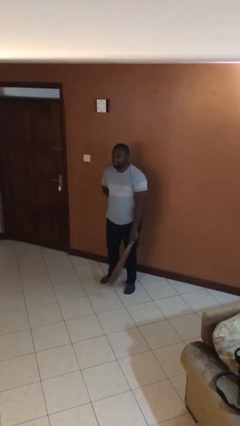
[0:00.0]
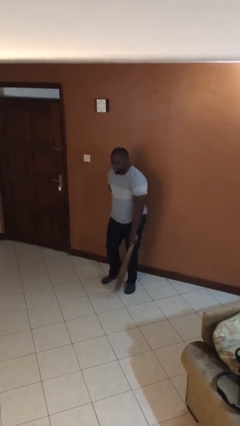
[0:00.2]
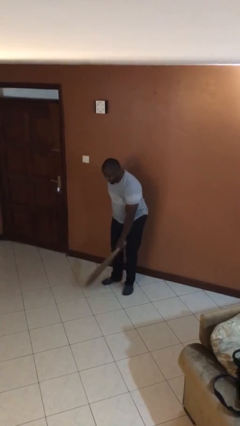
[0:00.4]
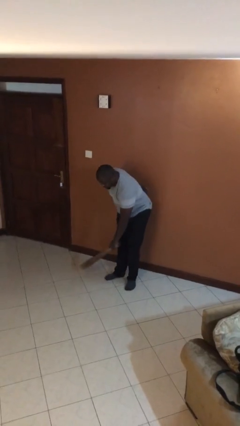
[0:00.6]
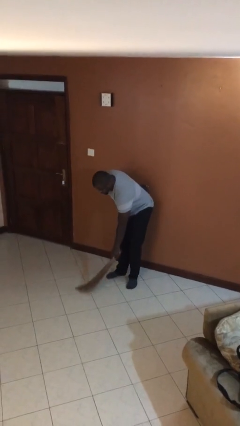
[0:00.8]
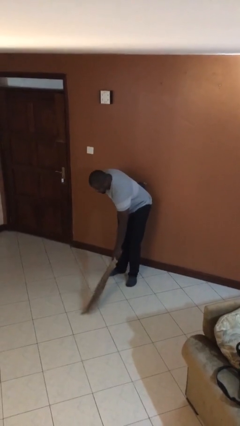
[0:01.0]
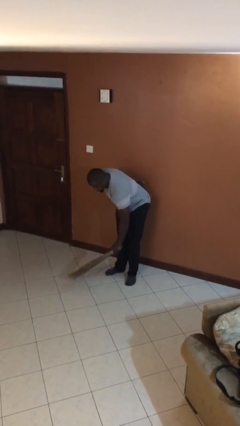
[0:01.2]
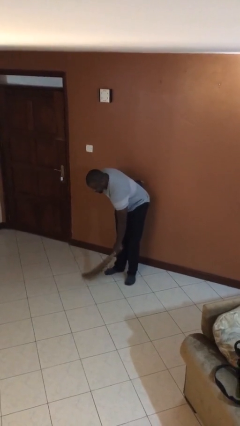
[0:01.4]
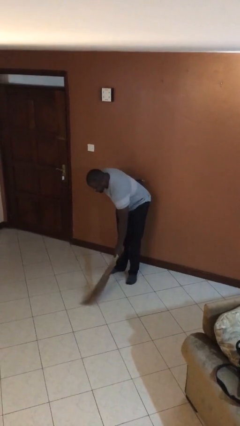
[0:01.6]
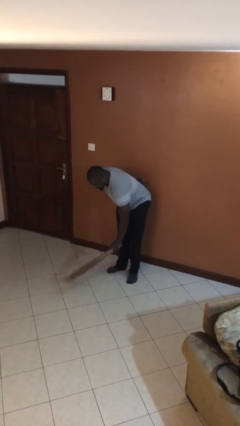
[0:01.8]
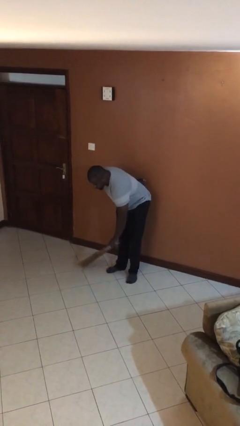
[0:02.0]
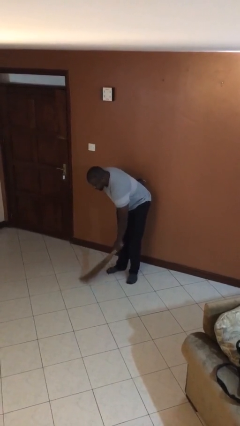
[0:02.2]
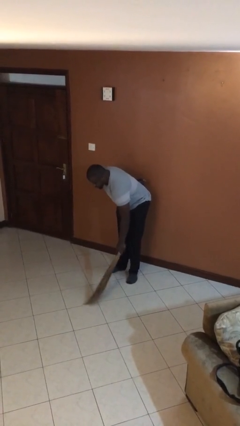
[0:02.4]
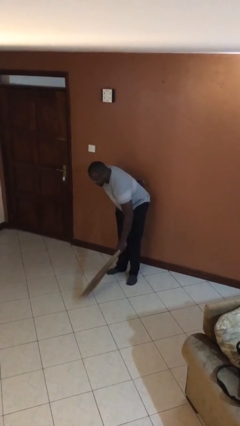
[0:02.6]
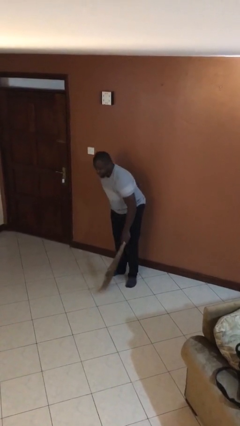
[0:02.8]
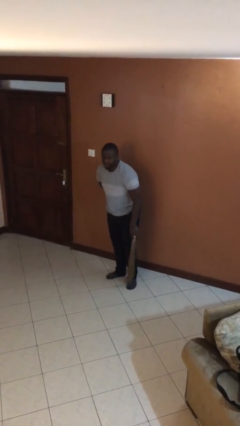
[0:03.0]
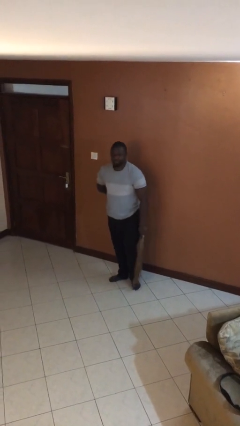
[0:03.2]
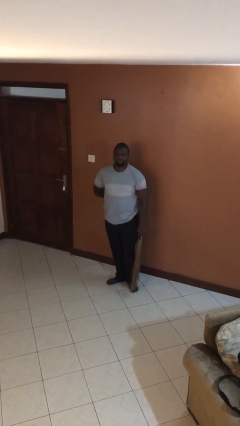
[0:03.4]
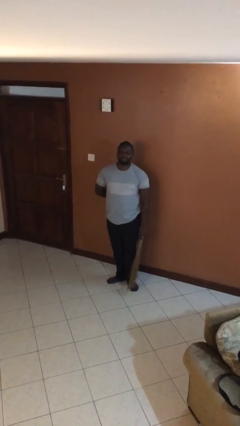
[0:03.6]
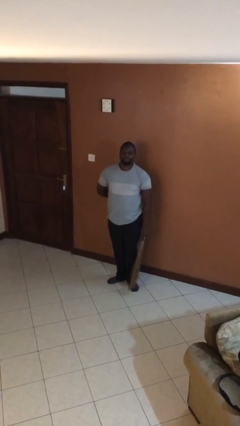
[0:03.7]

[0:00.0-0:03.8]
person sweeps floor

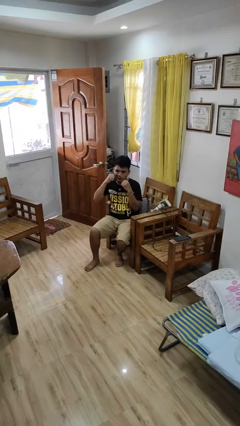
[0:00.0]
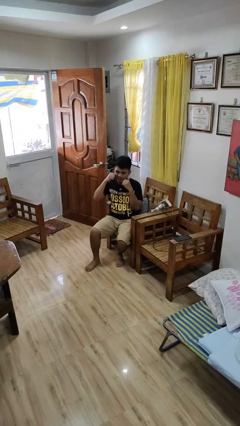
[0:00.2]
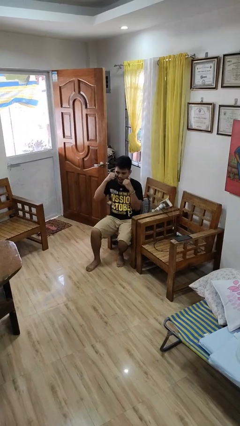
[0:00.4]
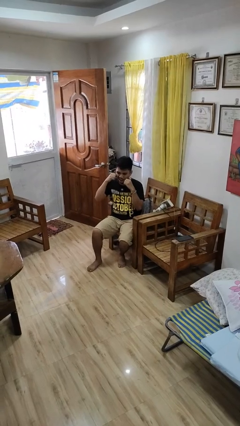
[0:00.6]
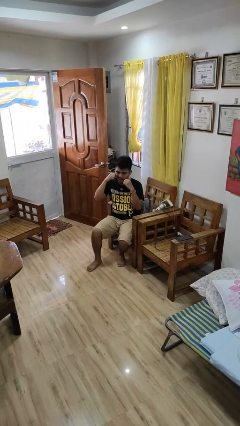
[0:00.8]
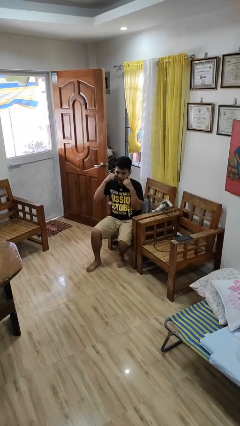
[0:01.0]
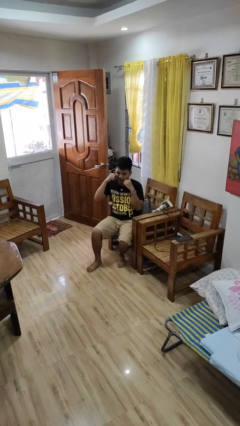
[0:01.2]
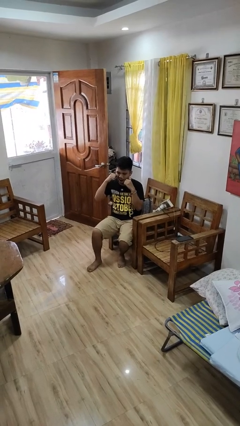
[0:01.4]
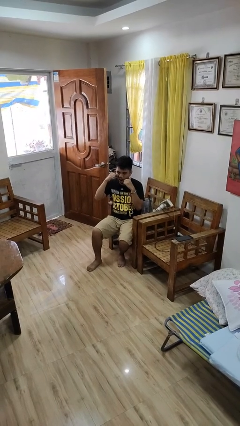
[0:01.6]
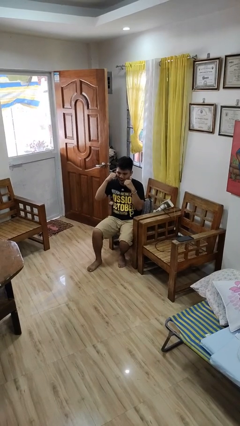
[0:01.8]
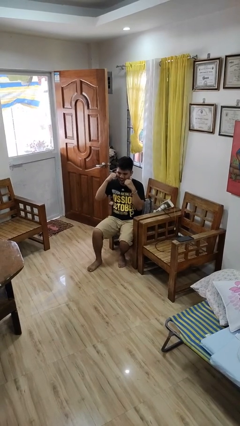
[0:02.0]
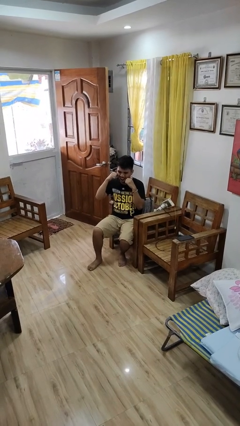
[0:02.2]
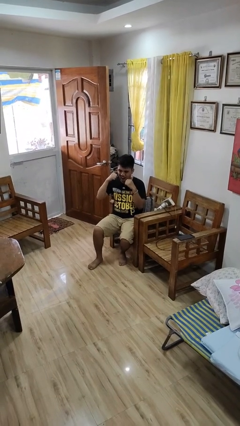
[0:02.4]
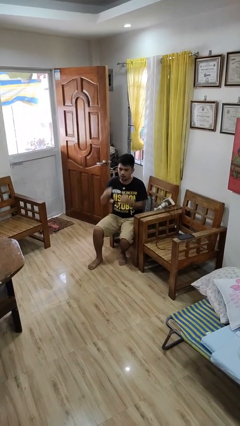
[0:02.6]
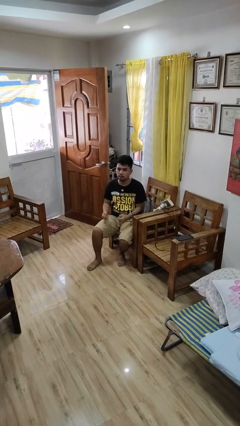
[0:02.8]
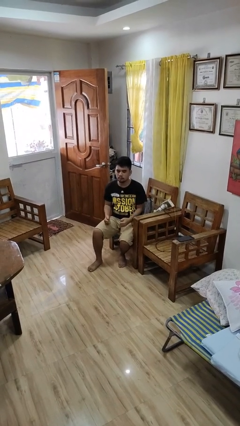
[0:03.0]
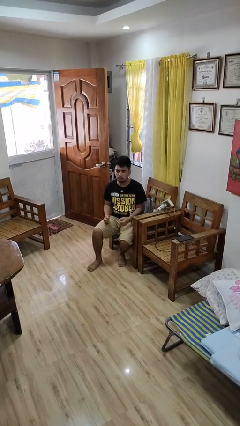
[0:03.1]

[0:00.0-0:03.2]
person flosses

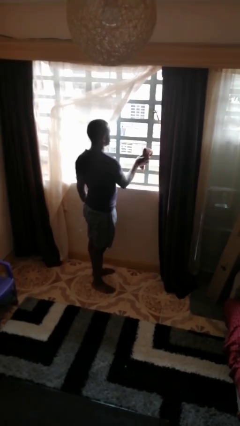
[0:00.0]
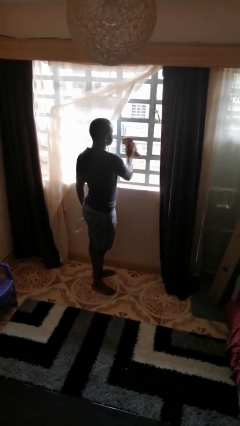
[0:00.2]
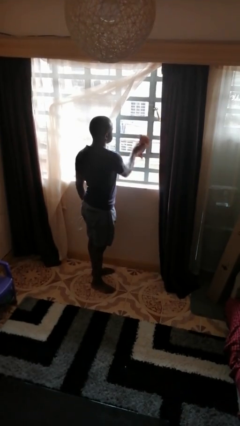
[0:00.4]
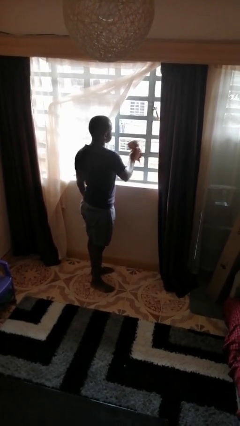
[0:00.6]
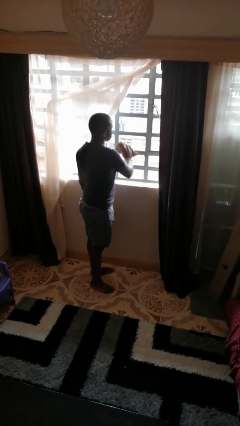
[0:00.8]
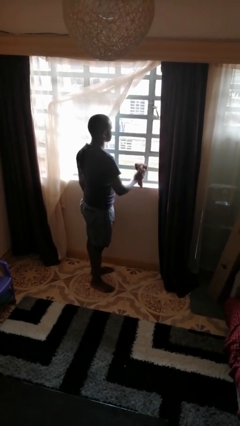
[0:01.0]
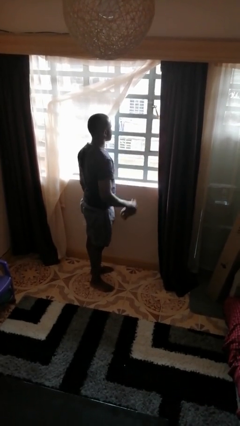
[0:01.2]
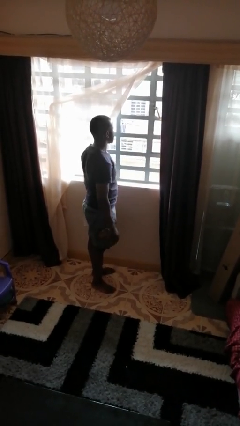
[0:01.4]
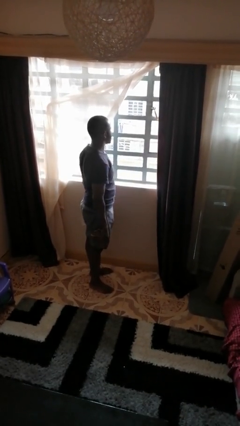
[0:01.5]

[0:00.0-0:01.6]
person washes window

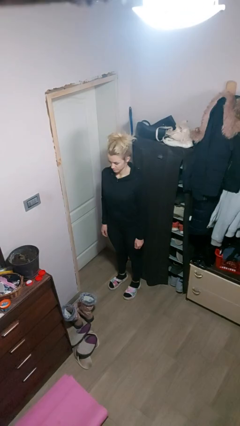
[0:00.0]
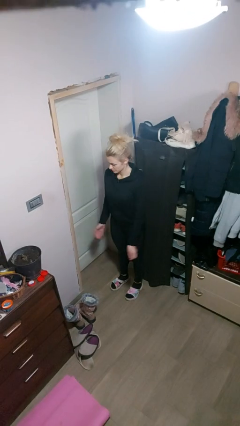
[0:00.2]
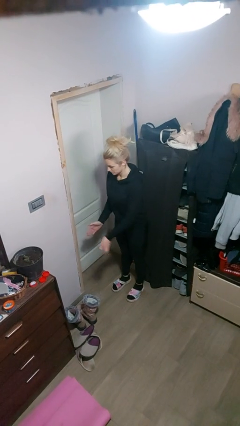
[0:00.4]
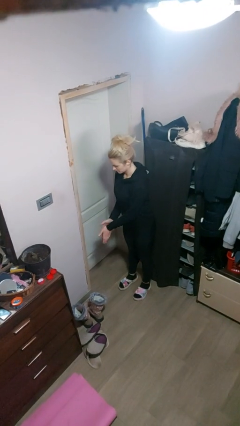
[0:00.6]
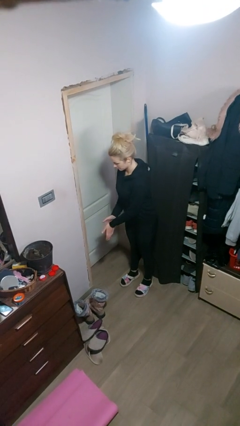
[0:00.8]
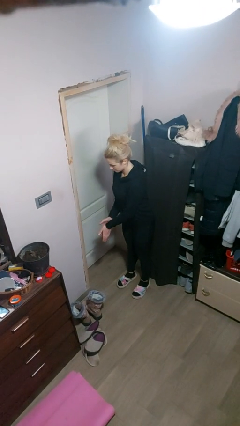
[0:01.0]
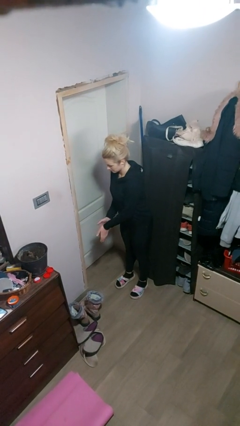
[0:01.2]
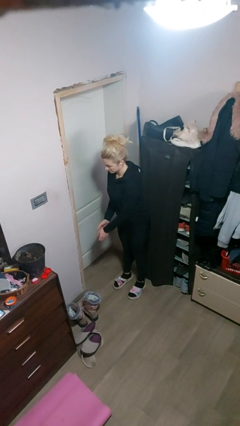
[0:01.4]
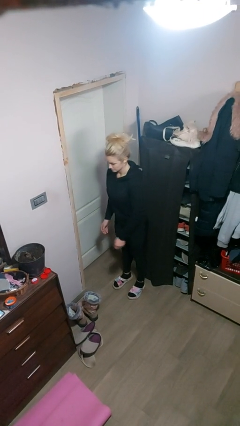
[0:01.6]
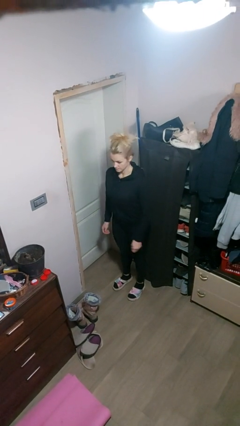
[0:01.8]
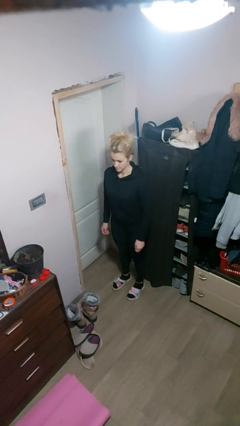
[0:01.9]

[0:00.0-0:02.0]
person claps hands

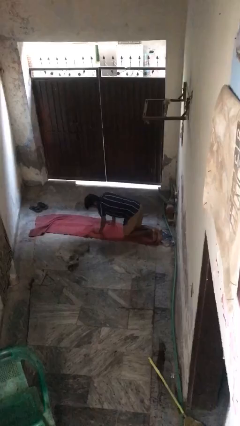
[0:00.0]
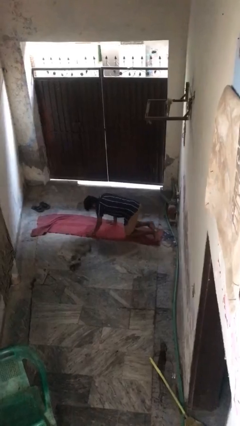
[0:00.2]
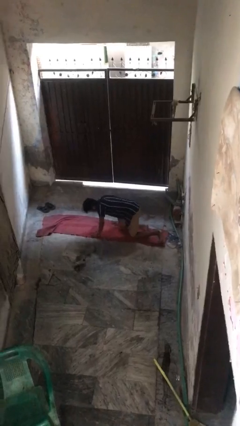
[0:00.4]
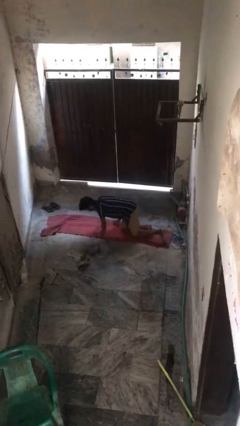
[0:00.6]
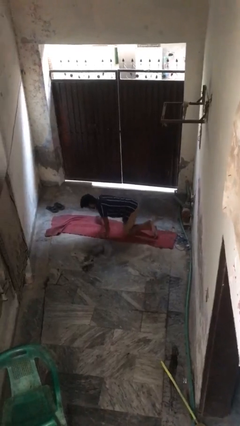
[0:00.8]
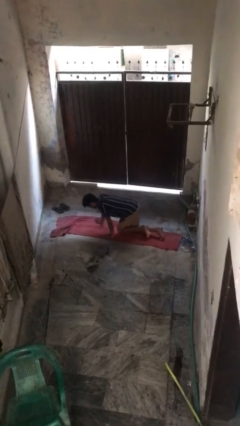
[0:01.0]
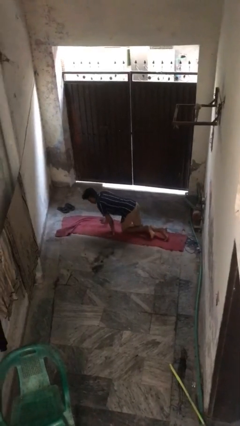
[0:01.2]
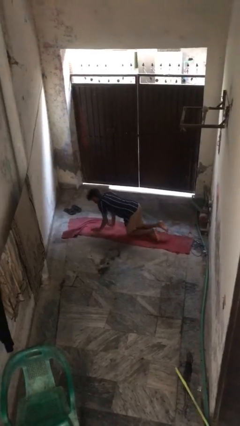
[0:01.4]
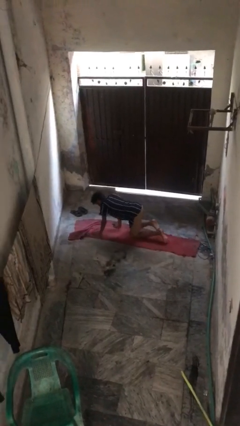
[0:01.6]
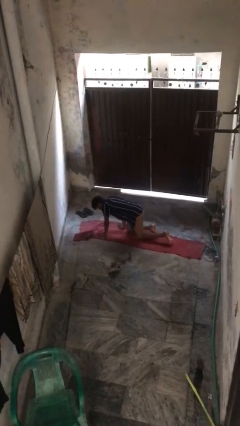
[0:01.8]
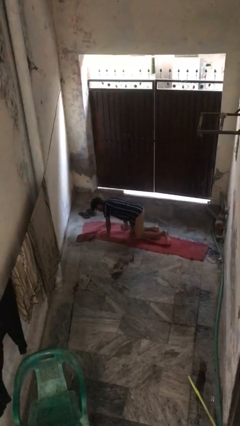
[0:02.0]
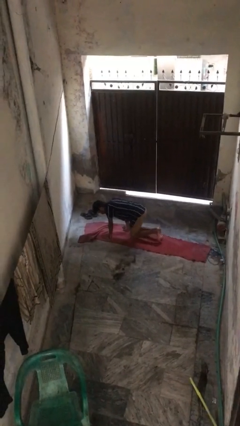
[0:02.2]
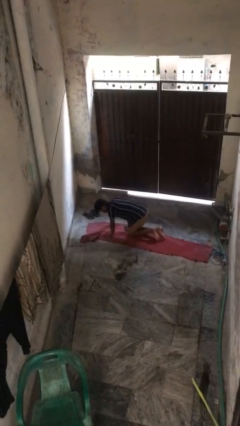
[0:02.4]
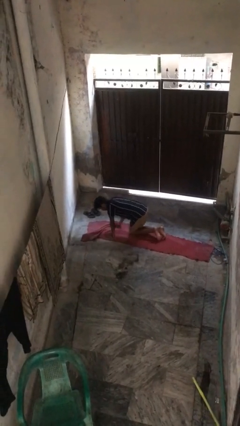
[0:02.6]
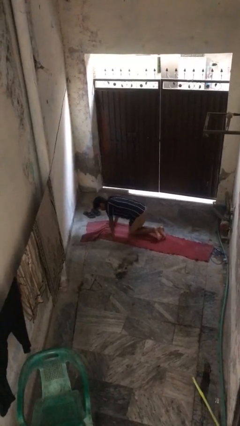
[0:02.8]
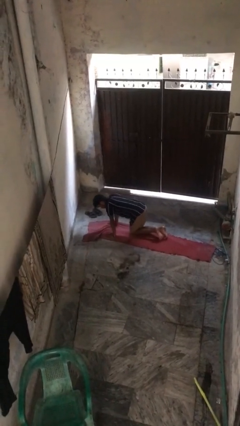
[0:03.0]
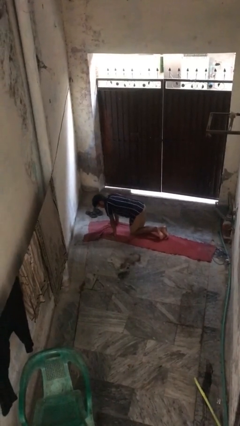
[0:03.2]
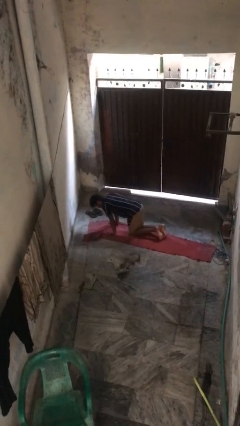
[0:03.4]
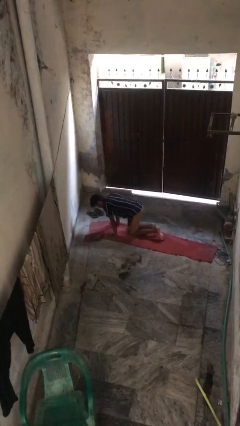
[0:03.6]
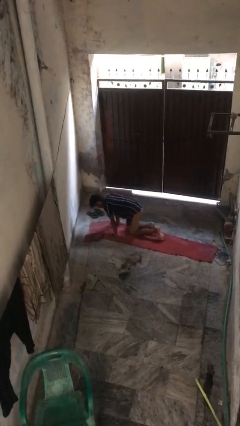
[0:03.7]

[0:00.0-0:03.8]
person crawls

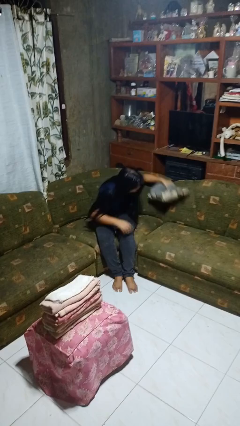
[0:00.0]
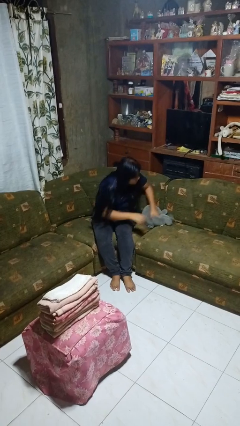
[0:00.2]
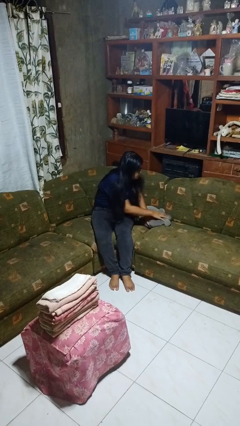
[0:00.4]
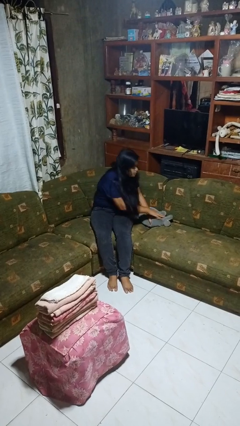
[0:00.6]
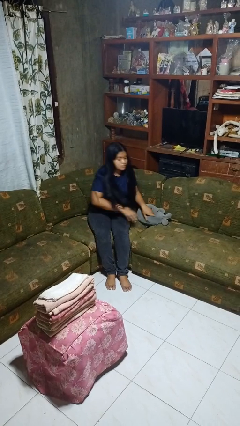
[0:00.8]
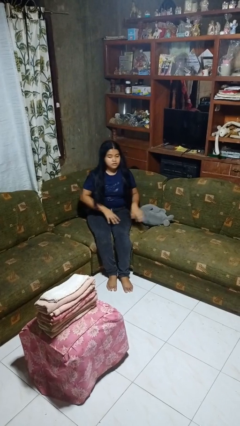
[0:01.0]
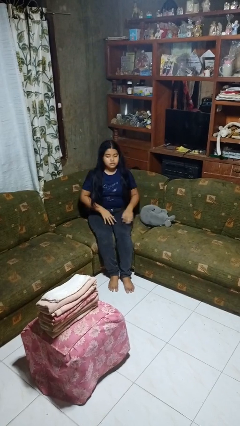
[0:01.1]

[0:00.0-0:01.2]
person searches in couch

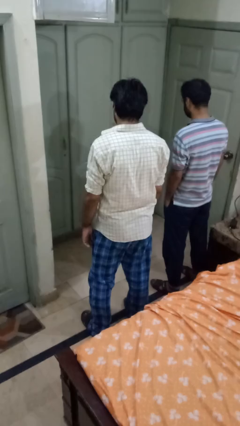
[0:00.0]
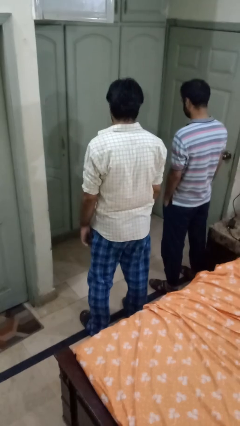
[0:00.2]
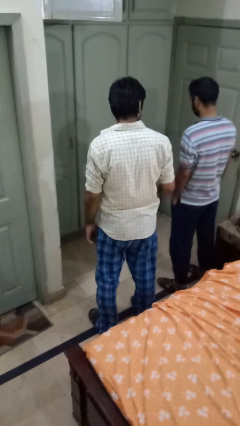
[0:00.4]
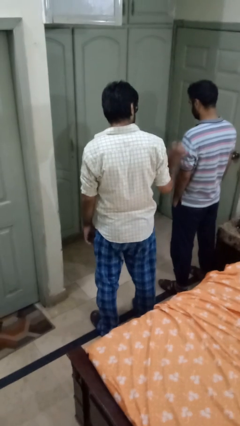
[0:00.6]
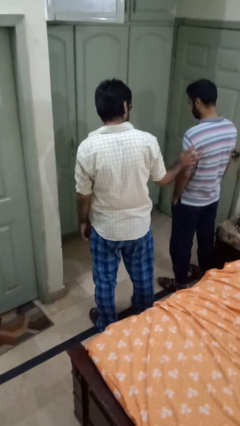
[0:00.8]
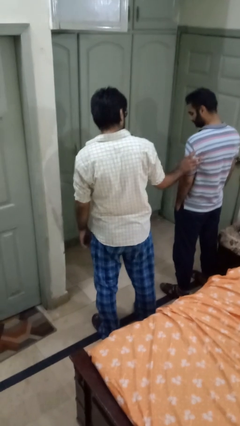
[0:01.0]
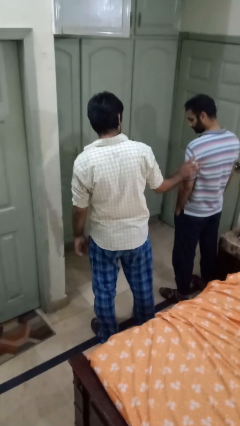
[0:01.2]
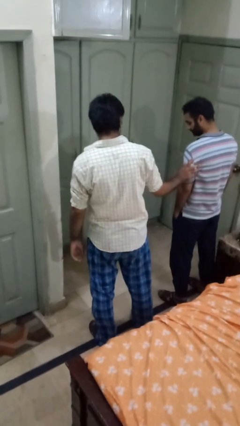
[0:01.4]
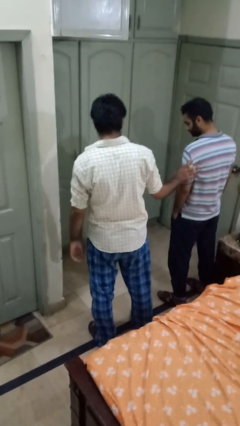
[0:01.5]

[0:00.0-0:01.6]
person grabs person by bicep

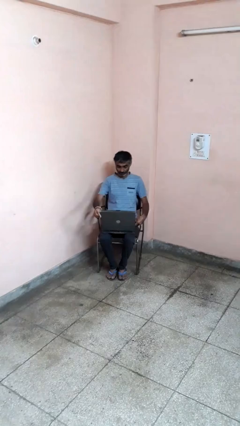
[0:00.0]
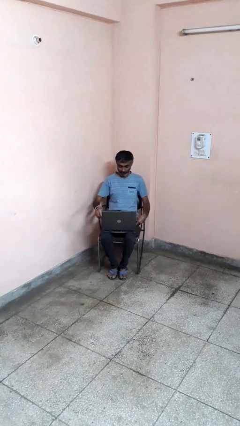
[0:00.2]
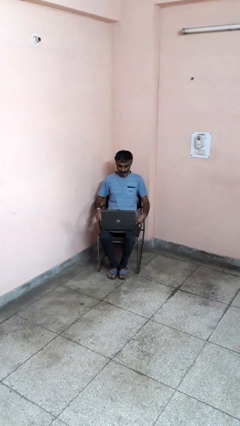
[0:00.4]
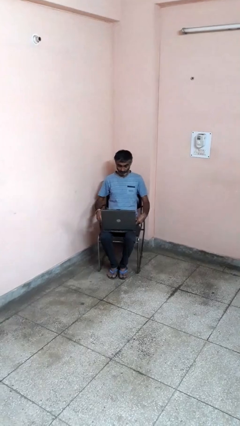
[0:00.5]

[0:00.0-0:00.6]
person opens laptop
